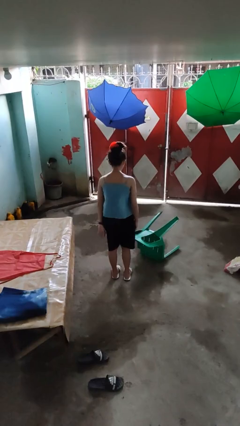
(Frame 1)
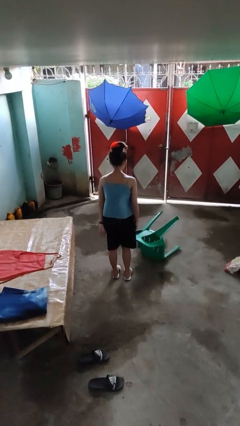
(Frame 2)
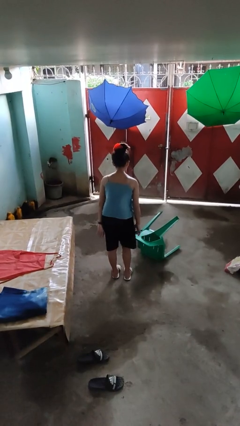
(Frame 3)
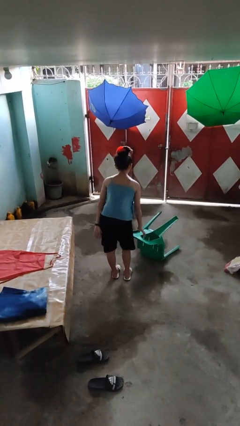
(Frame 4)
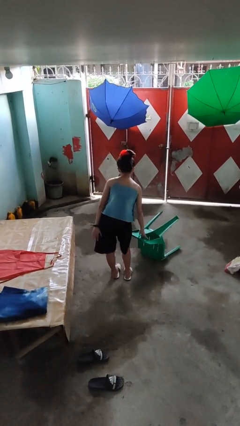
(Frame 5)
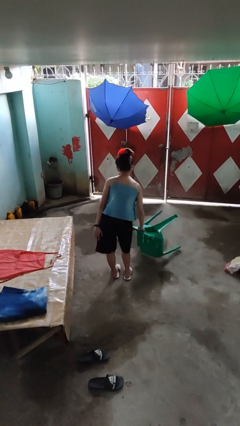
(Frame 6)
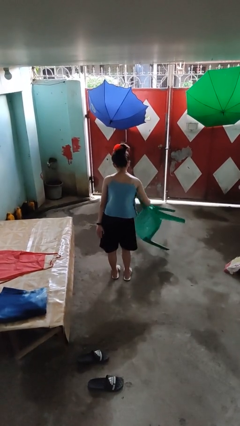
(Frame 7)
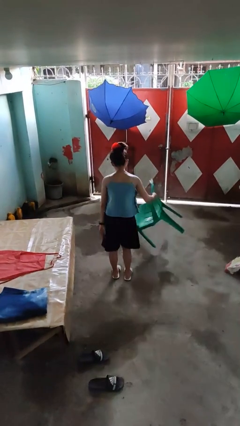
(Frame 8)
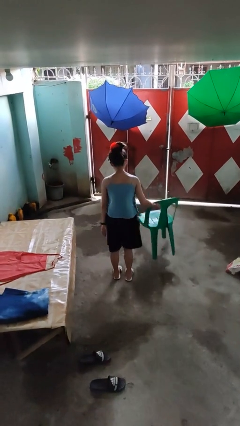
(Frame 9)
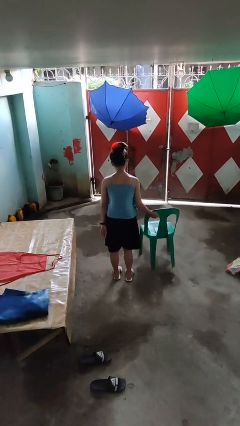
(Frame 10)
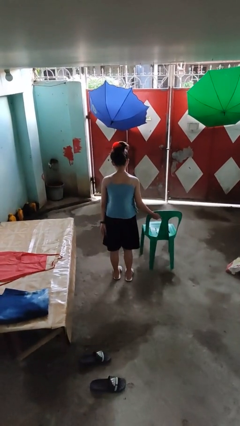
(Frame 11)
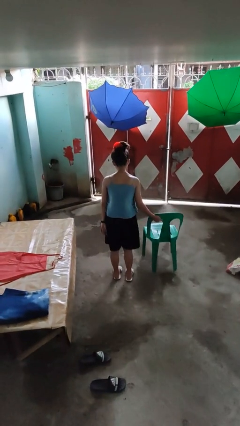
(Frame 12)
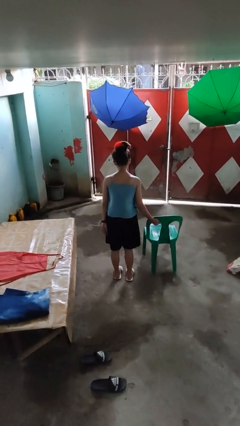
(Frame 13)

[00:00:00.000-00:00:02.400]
person sets upright furniture

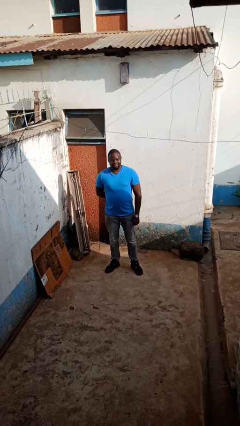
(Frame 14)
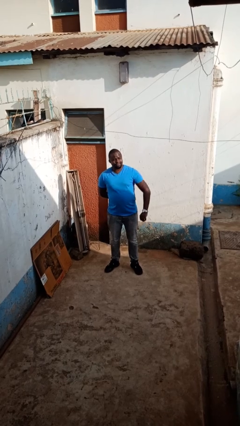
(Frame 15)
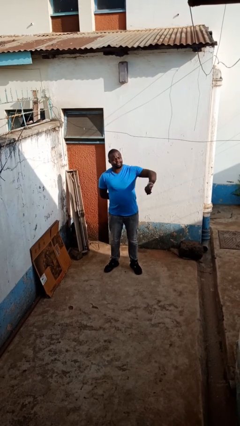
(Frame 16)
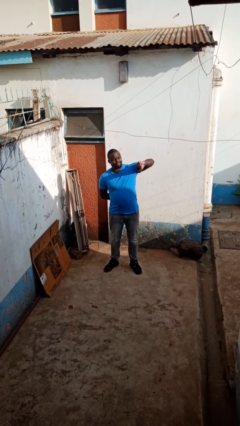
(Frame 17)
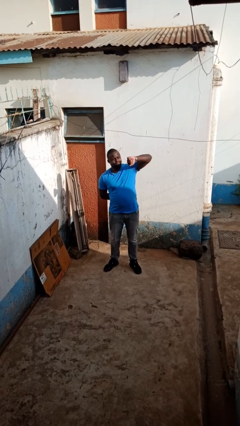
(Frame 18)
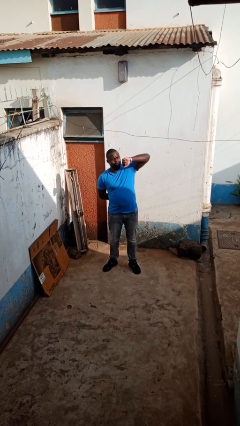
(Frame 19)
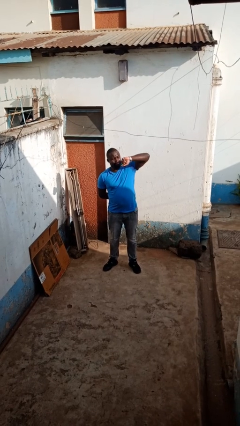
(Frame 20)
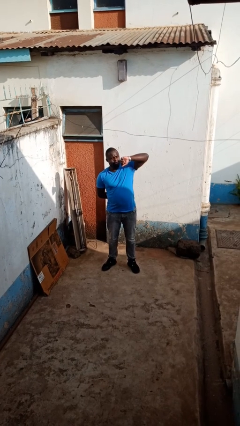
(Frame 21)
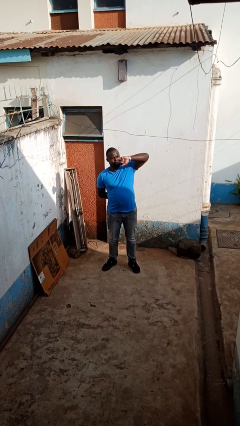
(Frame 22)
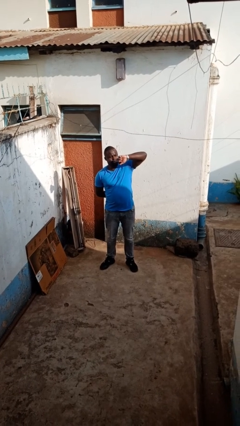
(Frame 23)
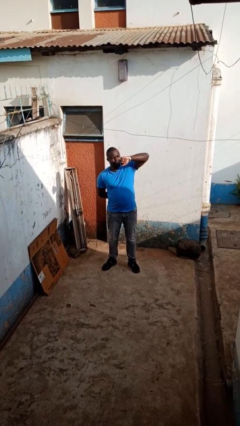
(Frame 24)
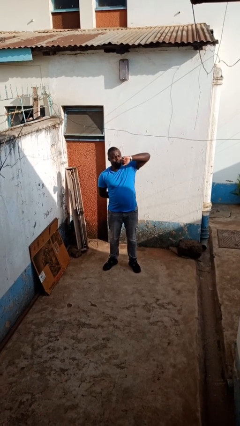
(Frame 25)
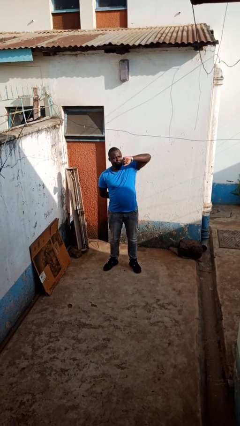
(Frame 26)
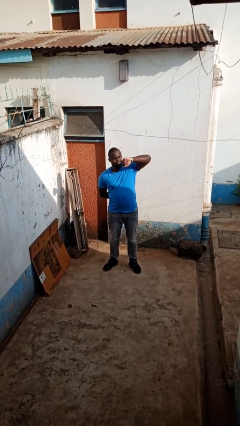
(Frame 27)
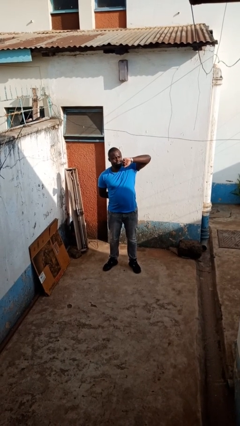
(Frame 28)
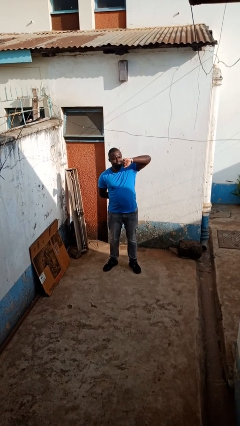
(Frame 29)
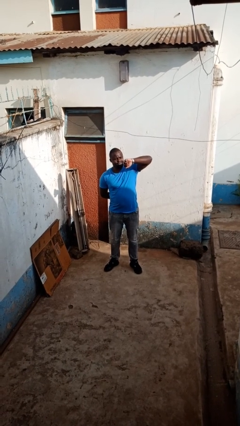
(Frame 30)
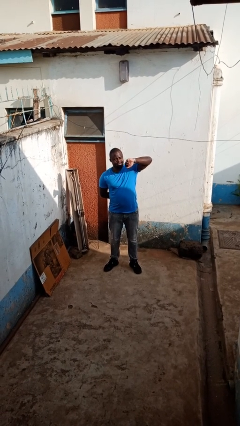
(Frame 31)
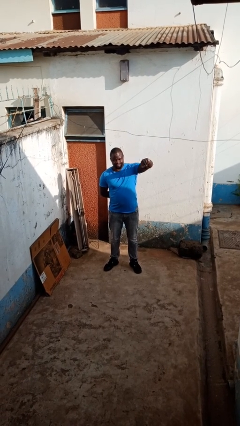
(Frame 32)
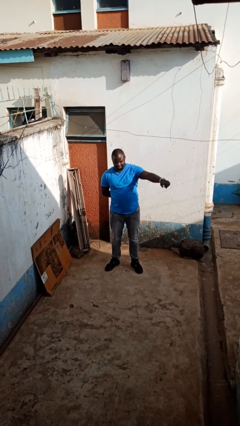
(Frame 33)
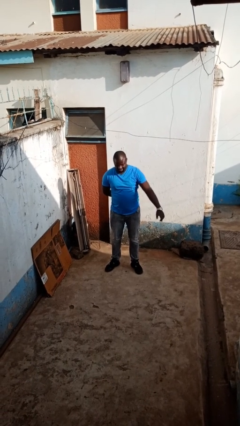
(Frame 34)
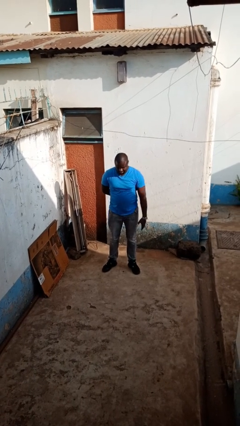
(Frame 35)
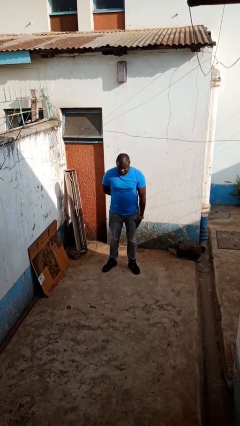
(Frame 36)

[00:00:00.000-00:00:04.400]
person looks at wristwatch

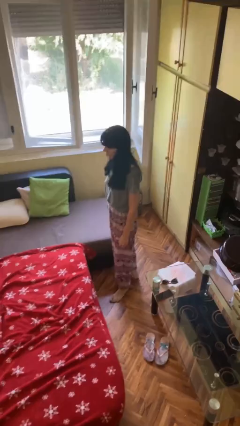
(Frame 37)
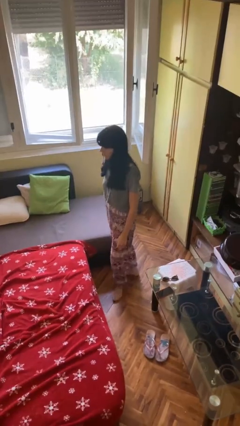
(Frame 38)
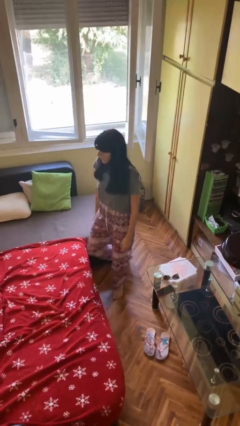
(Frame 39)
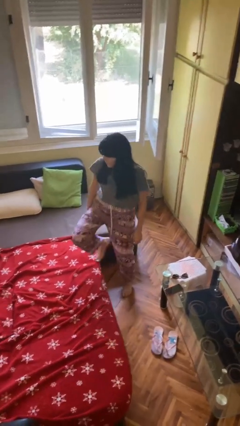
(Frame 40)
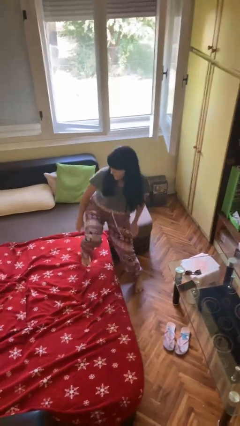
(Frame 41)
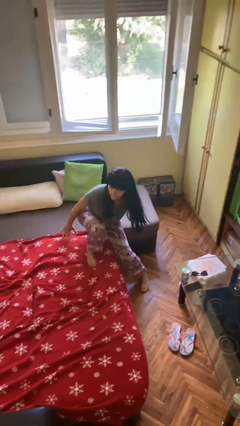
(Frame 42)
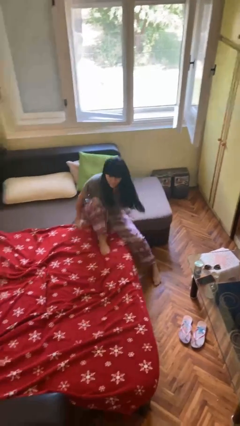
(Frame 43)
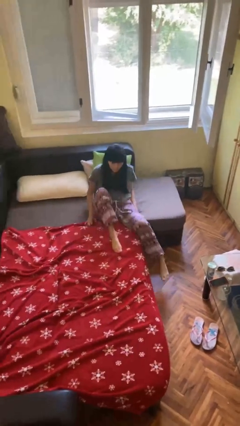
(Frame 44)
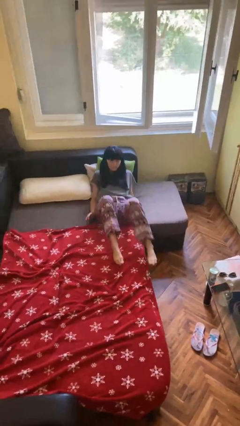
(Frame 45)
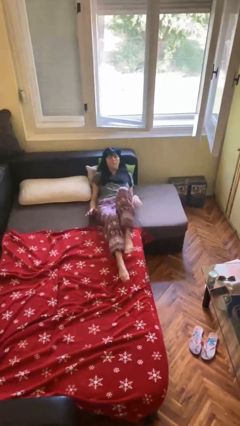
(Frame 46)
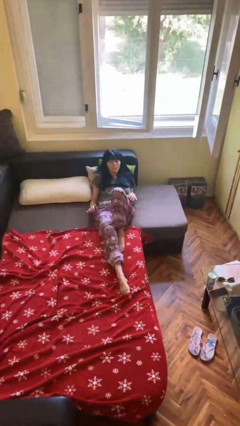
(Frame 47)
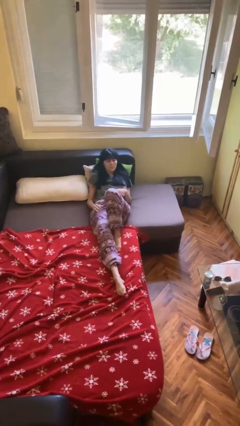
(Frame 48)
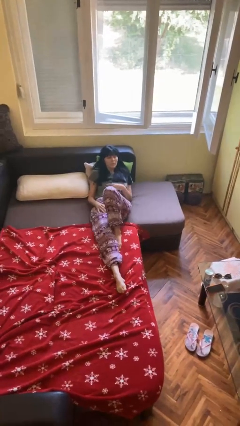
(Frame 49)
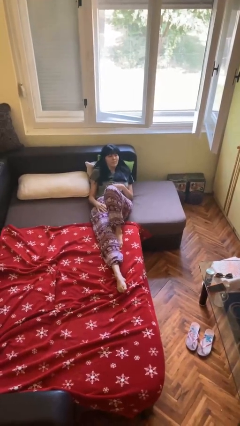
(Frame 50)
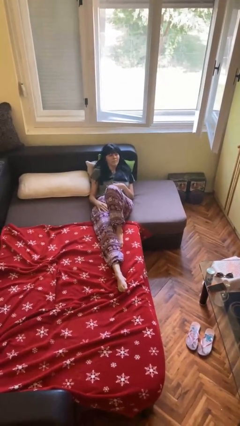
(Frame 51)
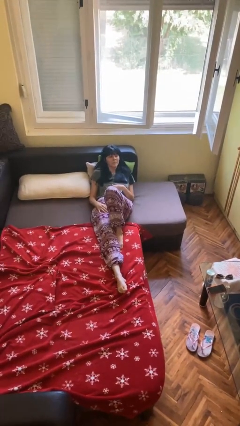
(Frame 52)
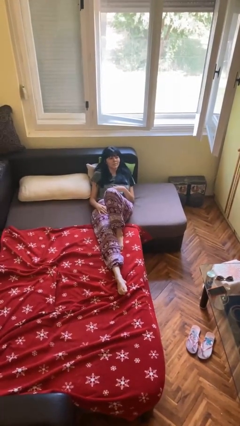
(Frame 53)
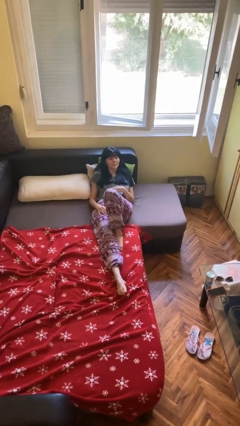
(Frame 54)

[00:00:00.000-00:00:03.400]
person lies down on bed

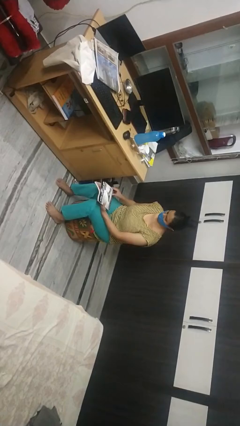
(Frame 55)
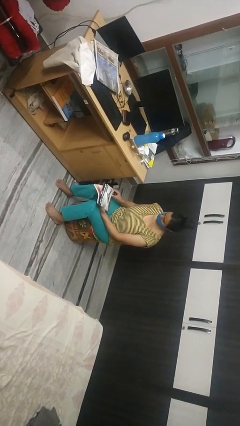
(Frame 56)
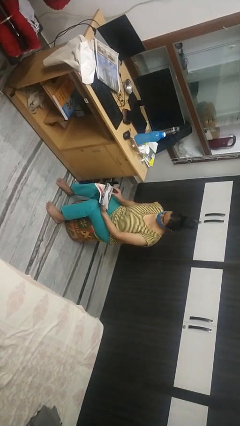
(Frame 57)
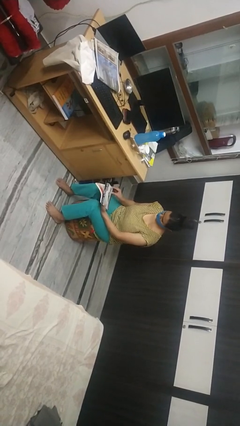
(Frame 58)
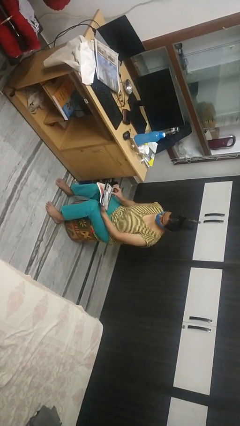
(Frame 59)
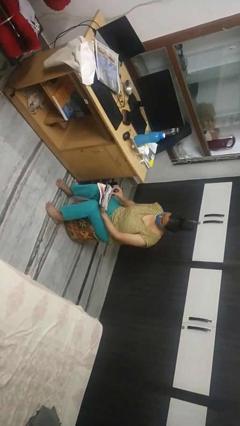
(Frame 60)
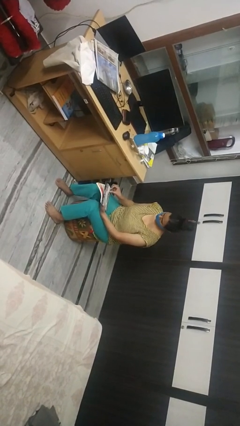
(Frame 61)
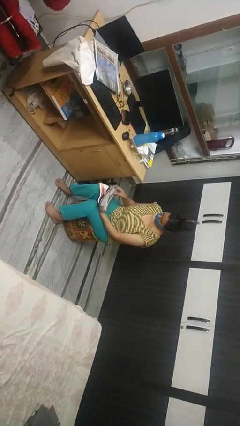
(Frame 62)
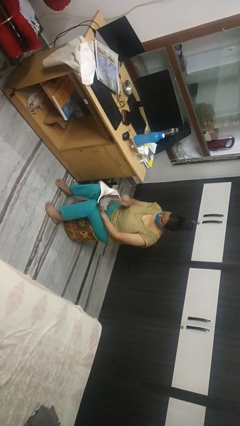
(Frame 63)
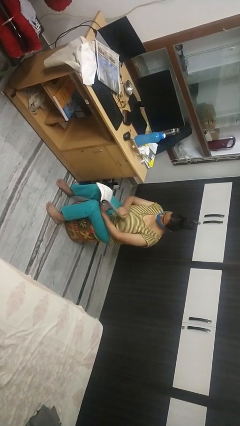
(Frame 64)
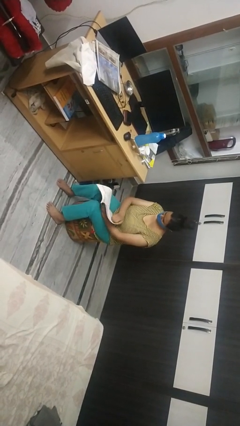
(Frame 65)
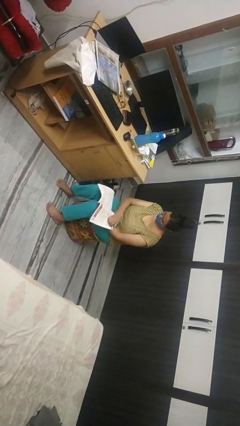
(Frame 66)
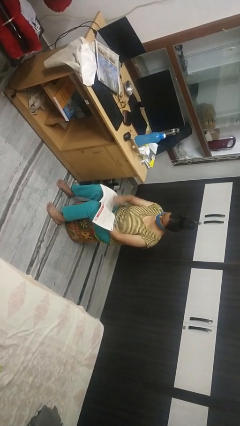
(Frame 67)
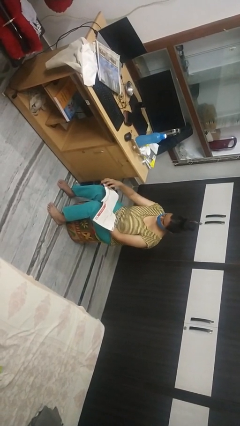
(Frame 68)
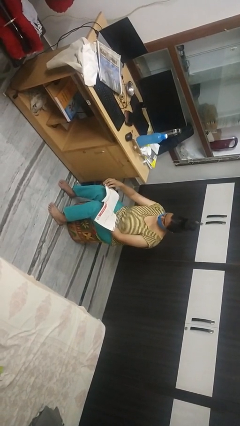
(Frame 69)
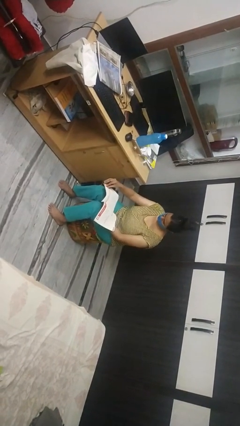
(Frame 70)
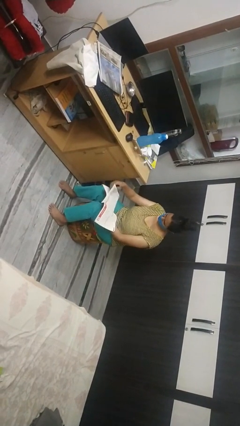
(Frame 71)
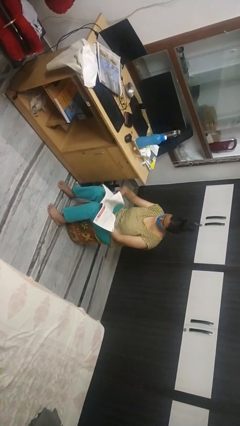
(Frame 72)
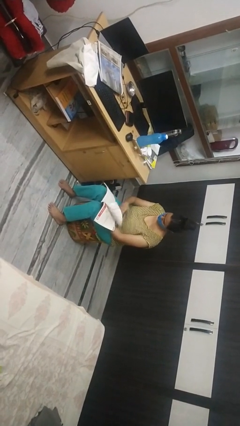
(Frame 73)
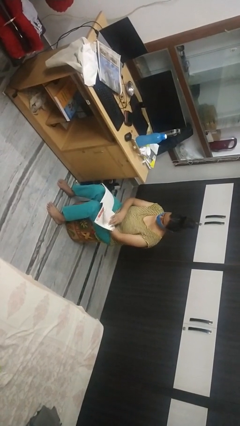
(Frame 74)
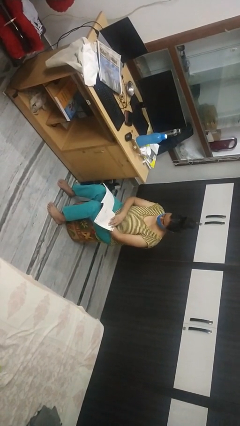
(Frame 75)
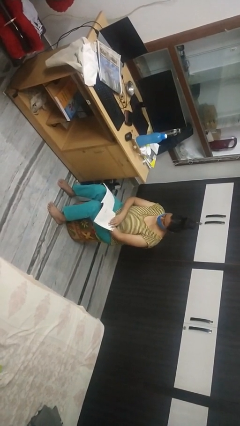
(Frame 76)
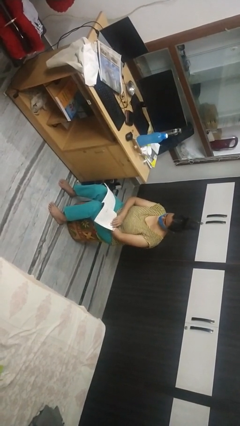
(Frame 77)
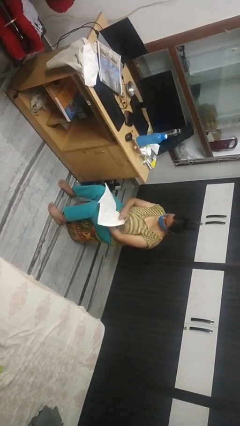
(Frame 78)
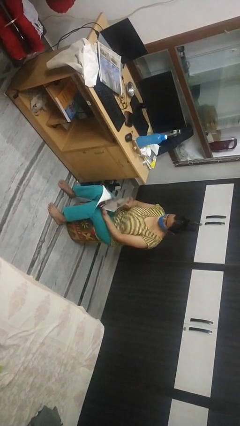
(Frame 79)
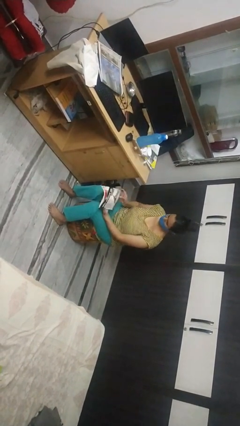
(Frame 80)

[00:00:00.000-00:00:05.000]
person reads magazine

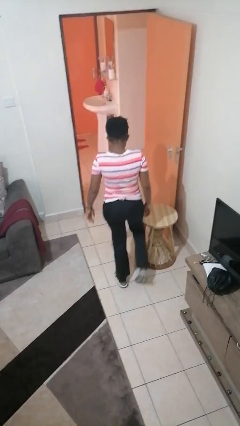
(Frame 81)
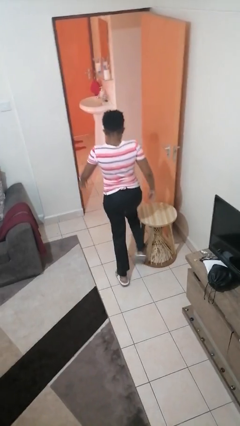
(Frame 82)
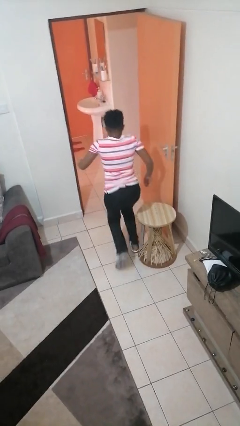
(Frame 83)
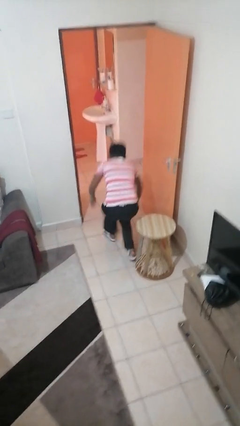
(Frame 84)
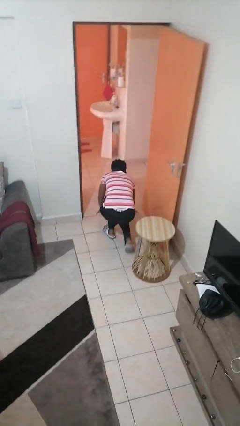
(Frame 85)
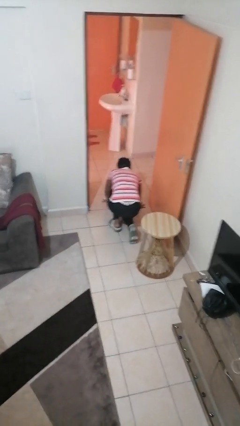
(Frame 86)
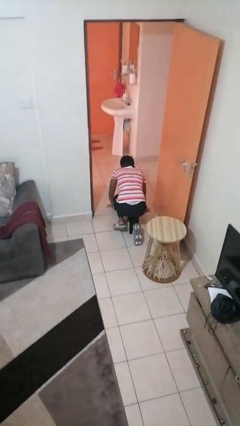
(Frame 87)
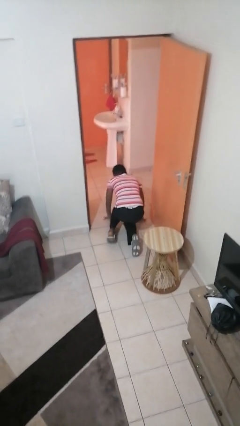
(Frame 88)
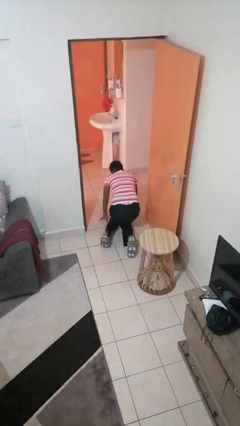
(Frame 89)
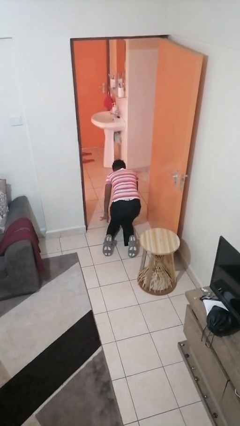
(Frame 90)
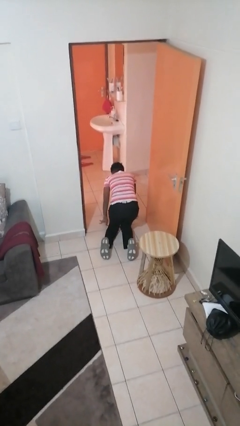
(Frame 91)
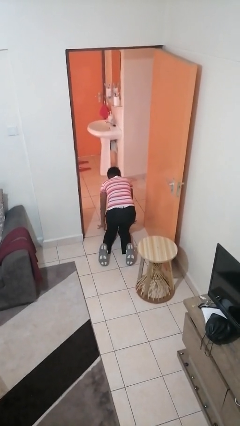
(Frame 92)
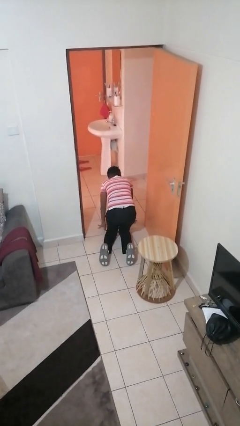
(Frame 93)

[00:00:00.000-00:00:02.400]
person trips on object on floor
